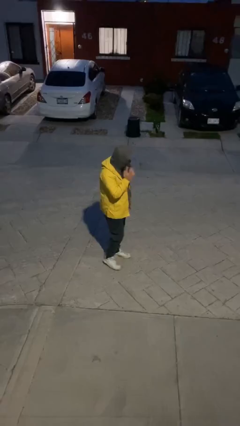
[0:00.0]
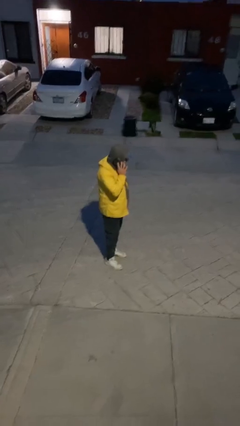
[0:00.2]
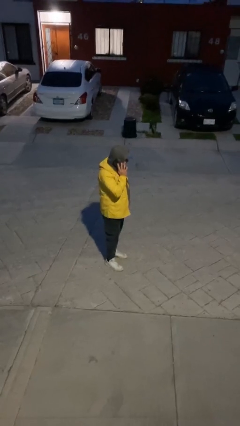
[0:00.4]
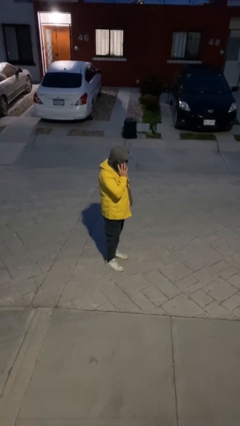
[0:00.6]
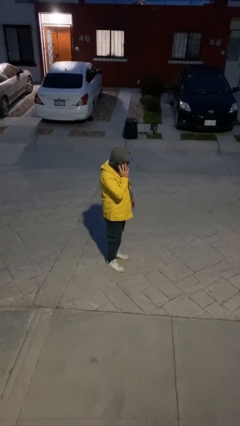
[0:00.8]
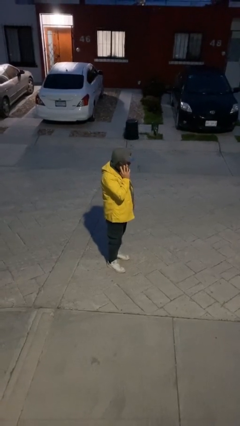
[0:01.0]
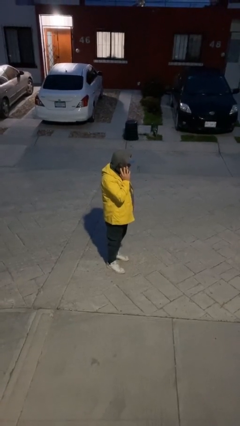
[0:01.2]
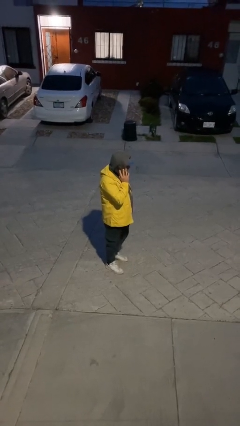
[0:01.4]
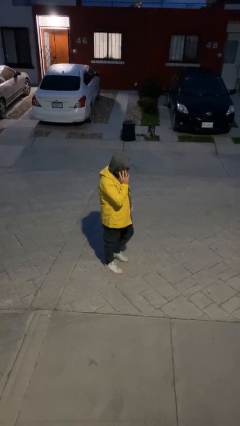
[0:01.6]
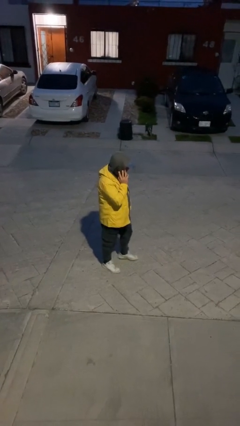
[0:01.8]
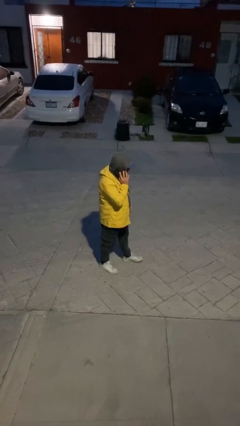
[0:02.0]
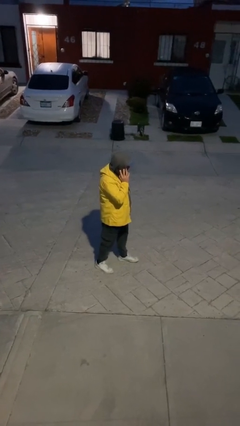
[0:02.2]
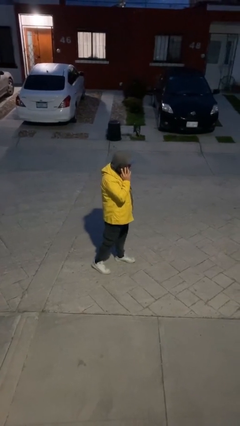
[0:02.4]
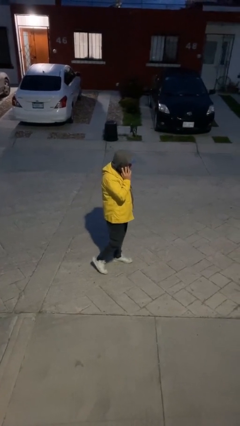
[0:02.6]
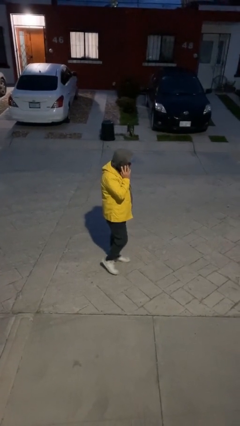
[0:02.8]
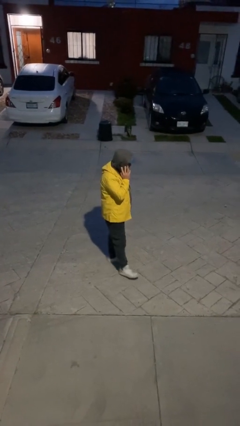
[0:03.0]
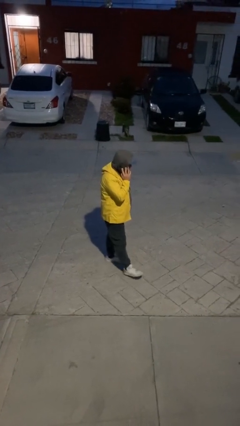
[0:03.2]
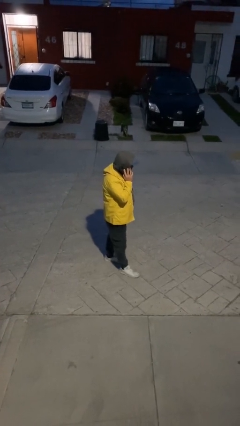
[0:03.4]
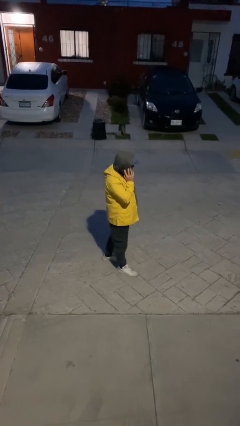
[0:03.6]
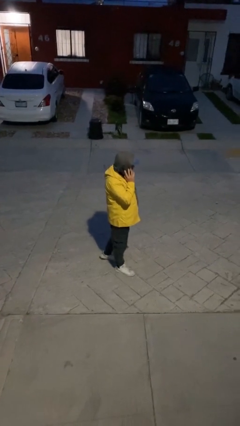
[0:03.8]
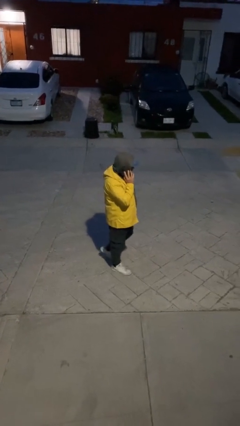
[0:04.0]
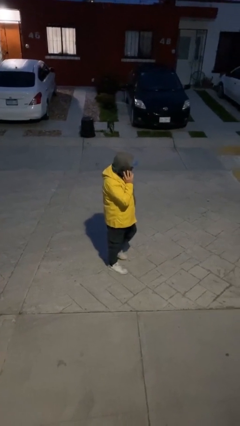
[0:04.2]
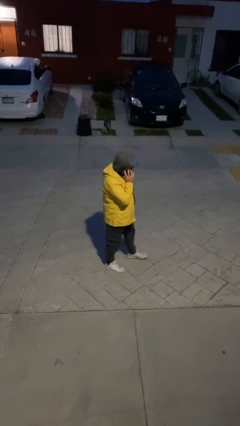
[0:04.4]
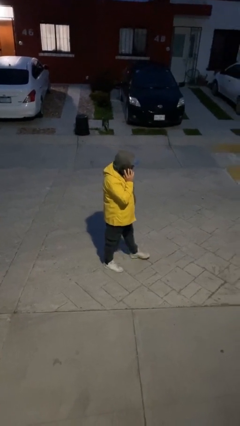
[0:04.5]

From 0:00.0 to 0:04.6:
person talks on phone

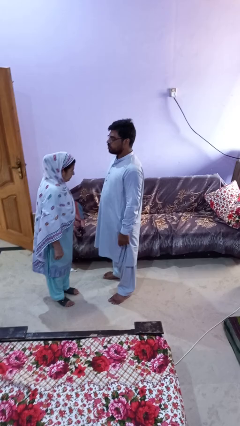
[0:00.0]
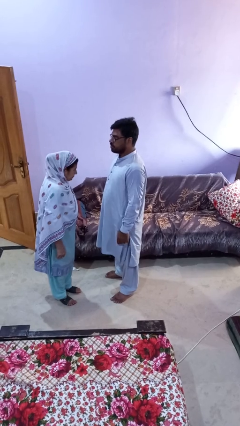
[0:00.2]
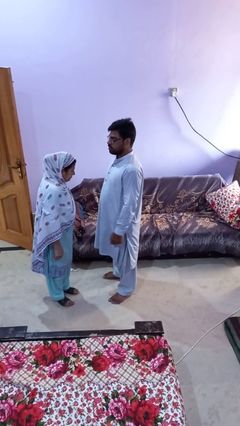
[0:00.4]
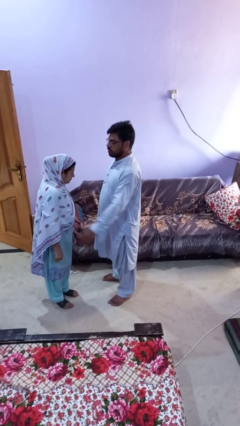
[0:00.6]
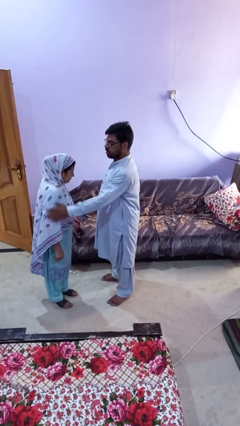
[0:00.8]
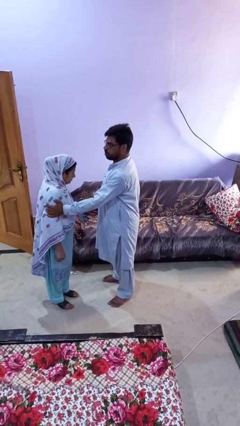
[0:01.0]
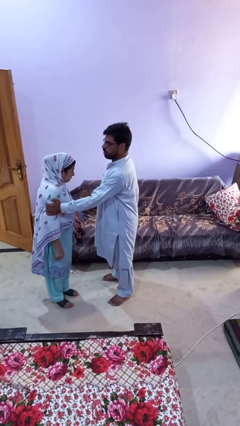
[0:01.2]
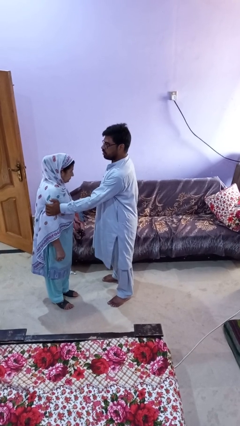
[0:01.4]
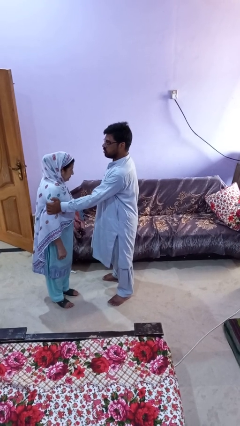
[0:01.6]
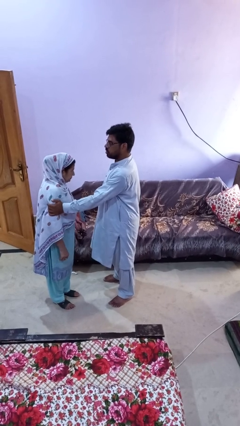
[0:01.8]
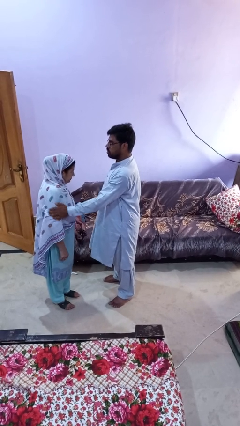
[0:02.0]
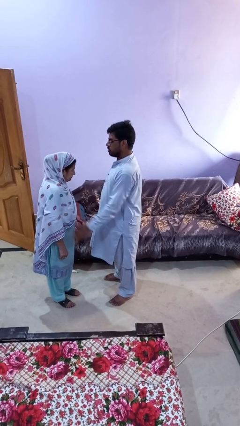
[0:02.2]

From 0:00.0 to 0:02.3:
person grabs person by bicep

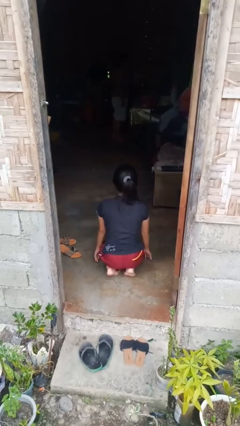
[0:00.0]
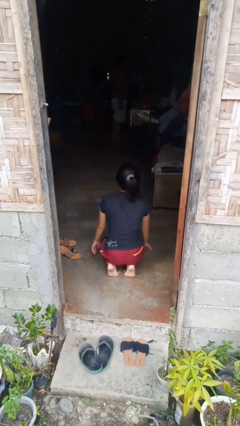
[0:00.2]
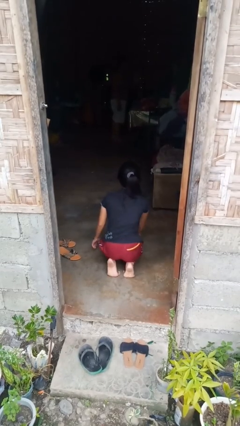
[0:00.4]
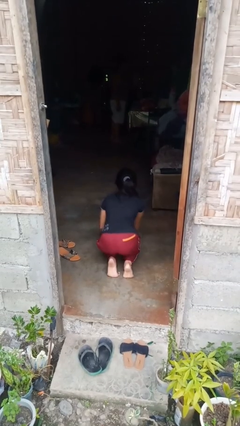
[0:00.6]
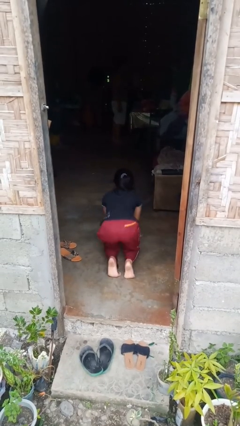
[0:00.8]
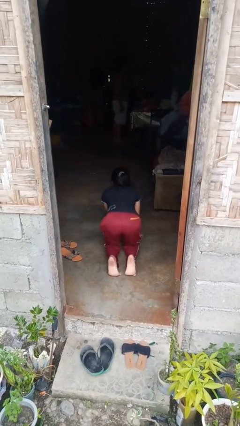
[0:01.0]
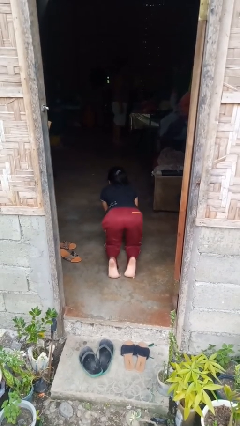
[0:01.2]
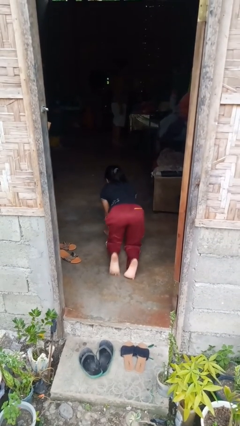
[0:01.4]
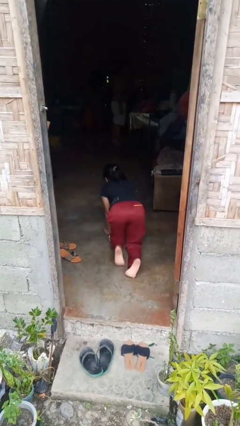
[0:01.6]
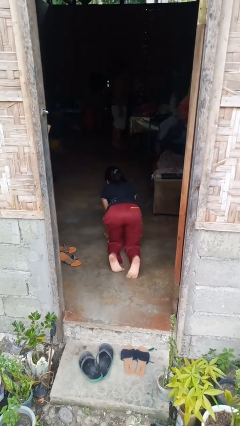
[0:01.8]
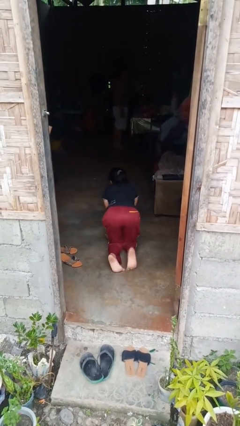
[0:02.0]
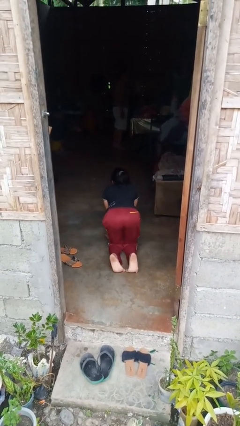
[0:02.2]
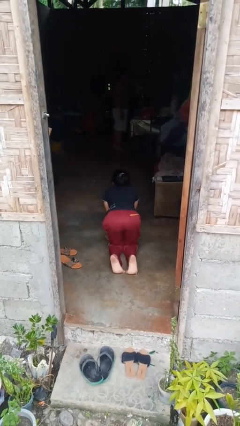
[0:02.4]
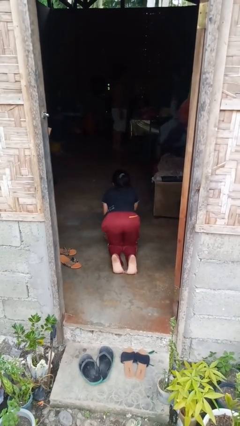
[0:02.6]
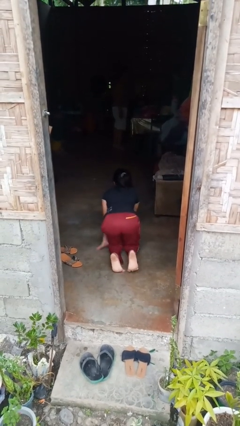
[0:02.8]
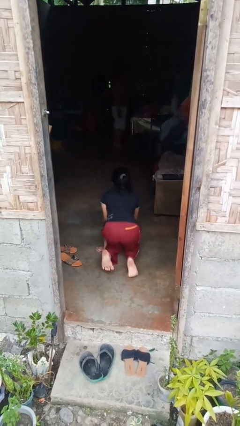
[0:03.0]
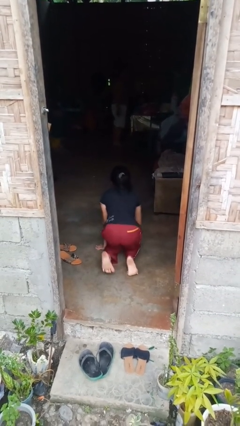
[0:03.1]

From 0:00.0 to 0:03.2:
person crawls

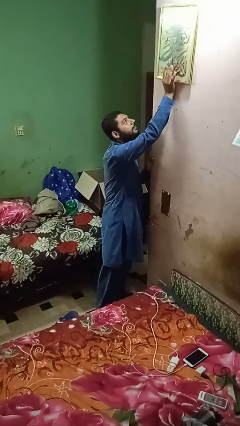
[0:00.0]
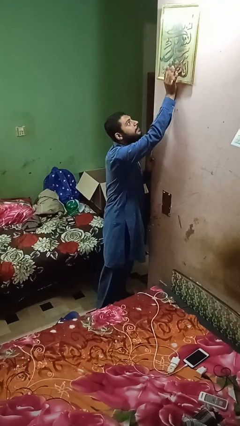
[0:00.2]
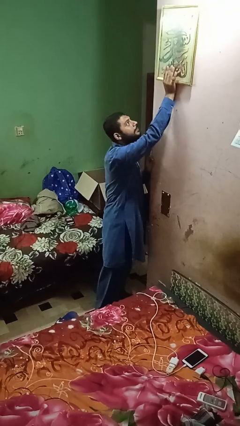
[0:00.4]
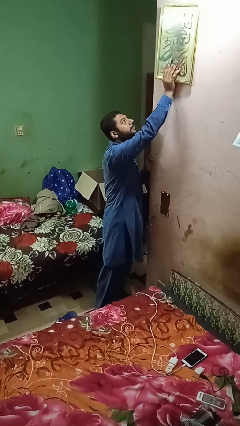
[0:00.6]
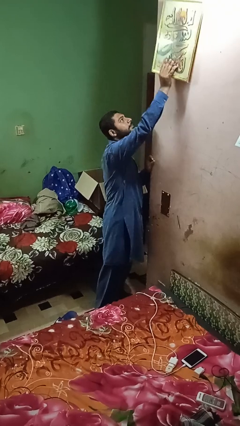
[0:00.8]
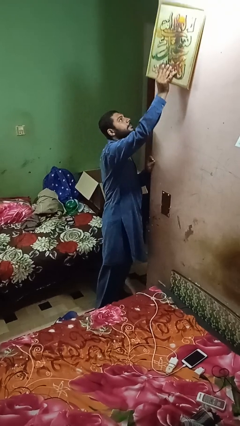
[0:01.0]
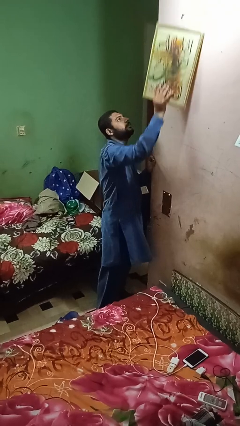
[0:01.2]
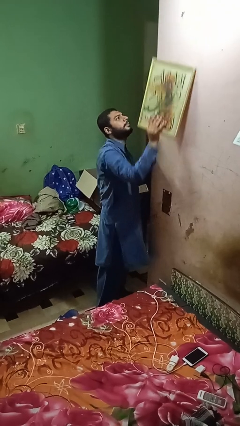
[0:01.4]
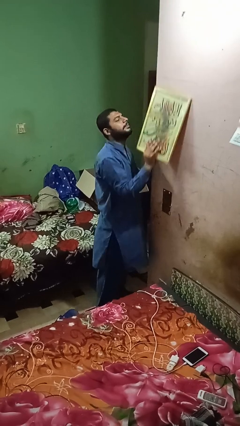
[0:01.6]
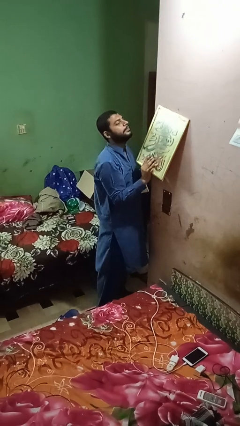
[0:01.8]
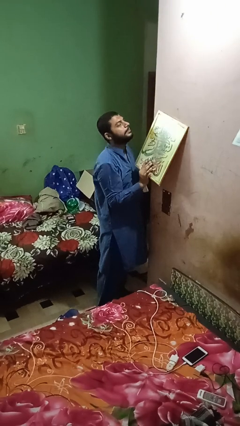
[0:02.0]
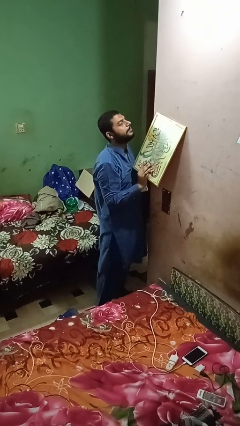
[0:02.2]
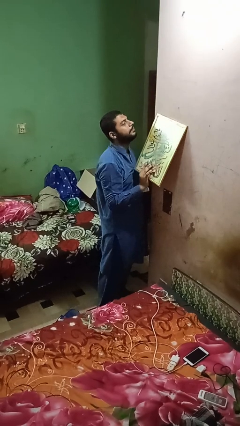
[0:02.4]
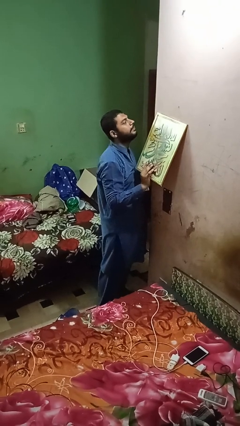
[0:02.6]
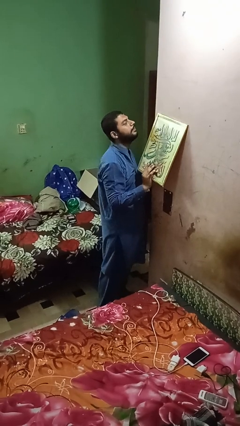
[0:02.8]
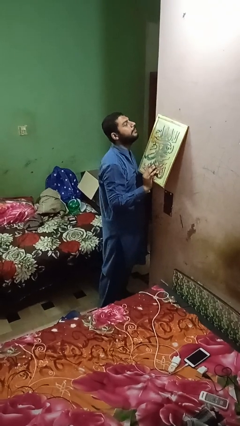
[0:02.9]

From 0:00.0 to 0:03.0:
person takes down picture frame

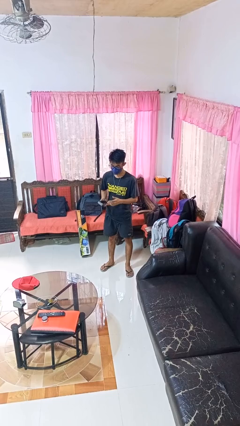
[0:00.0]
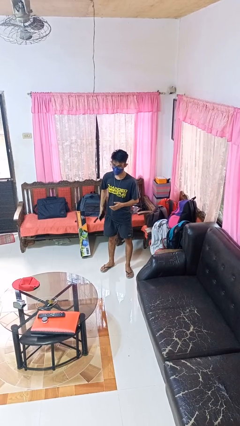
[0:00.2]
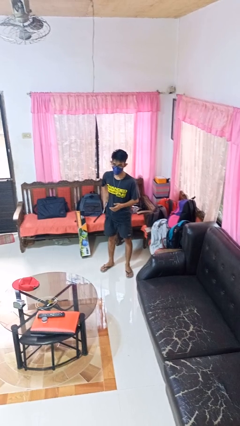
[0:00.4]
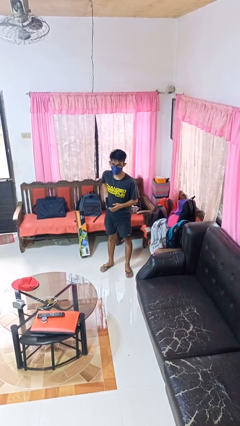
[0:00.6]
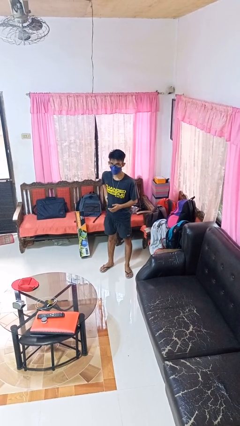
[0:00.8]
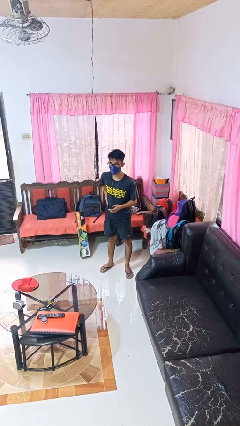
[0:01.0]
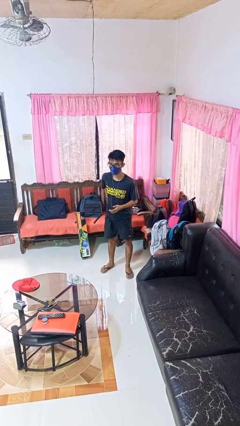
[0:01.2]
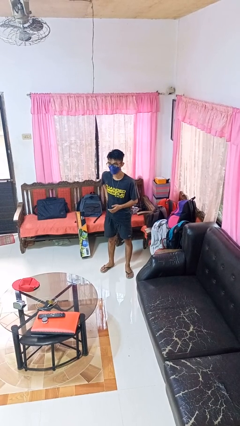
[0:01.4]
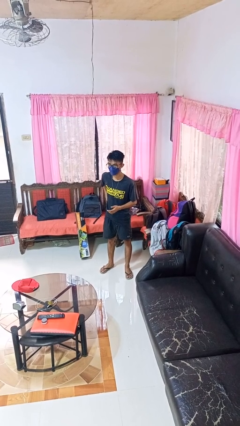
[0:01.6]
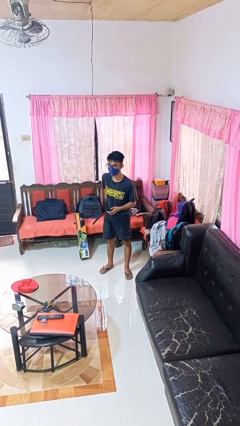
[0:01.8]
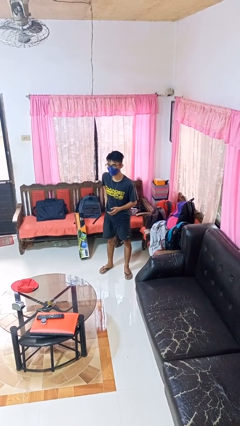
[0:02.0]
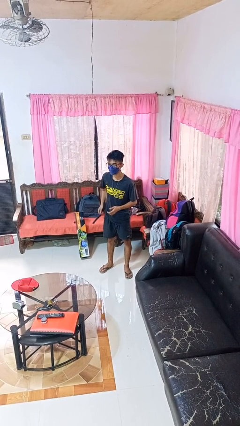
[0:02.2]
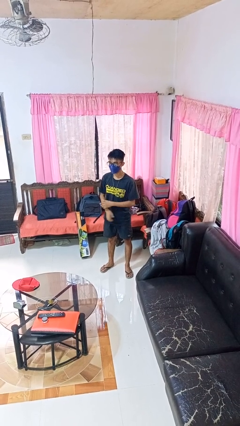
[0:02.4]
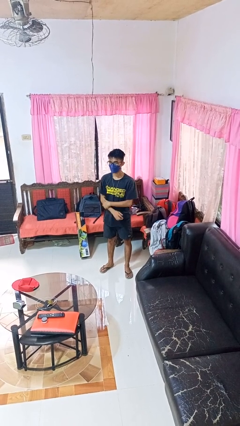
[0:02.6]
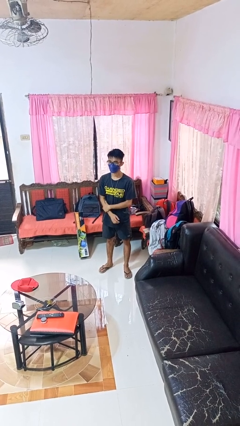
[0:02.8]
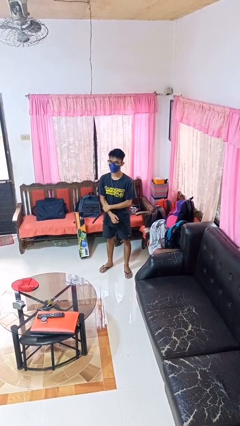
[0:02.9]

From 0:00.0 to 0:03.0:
person puts phone into pocket

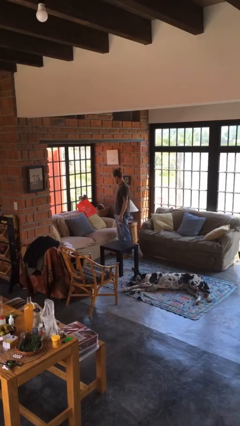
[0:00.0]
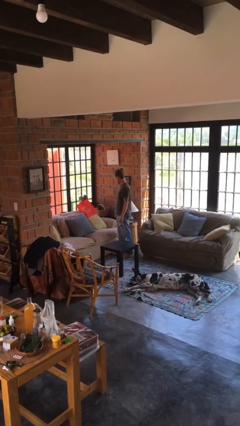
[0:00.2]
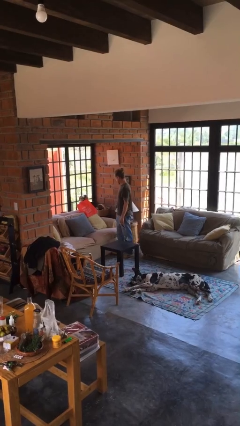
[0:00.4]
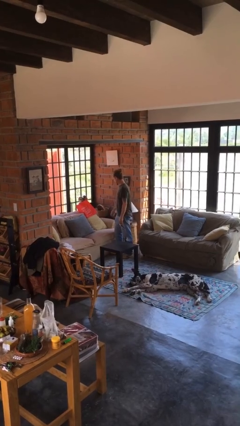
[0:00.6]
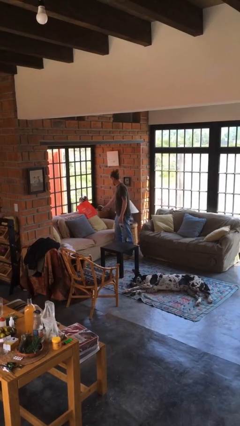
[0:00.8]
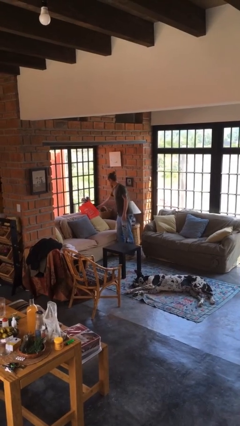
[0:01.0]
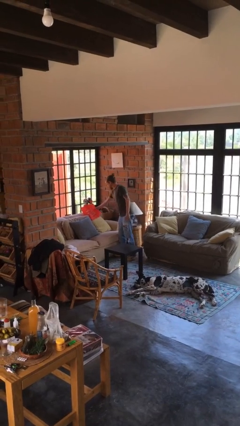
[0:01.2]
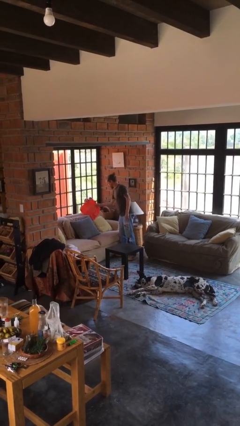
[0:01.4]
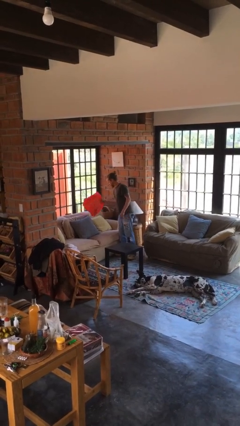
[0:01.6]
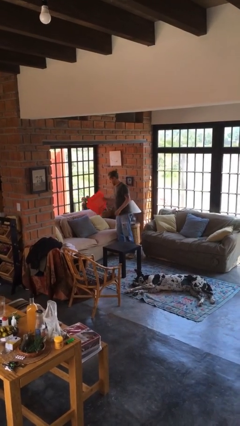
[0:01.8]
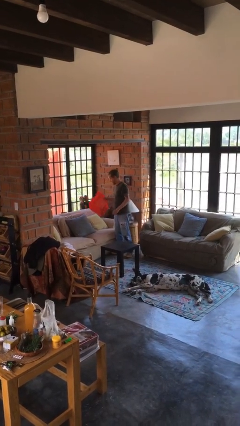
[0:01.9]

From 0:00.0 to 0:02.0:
person picks up object from couch
